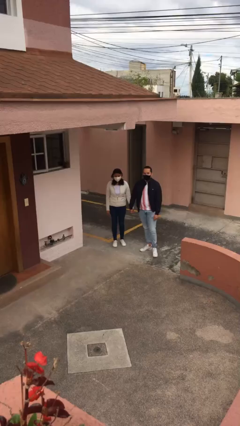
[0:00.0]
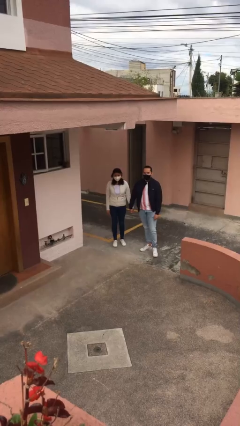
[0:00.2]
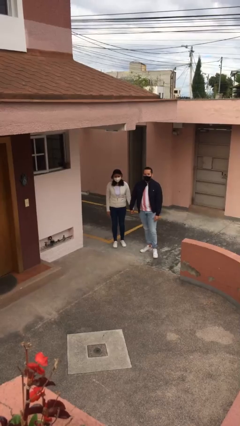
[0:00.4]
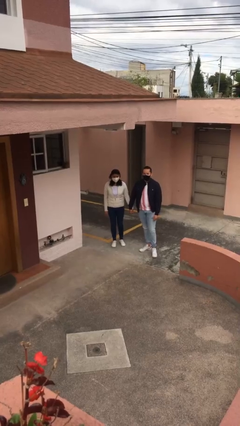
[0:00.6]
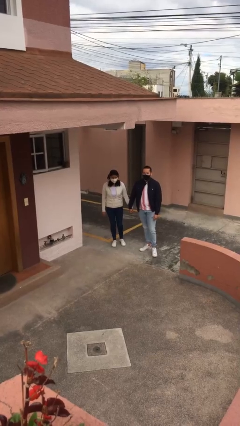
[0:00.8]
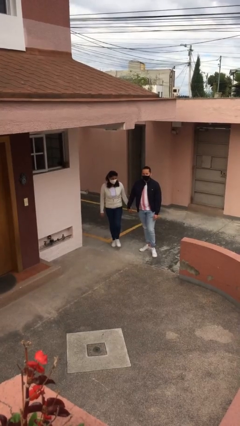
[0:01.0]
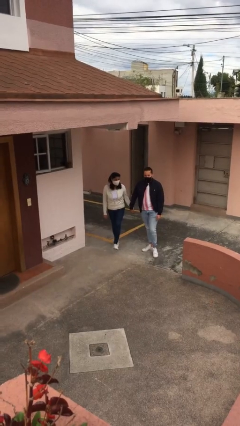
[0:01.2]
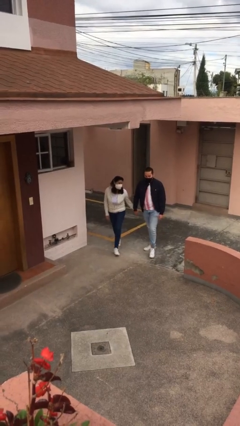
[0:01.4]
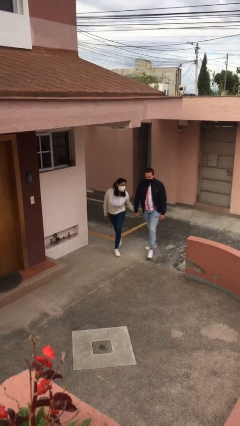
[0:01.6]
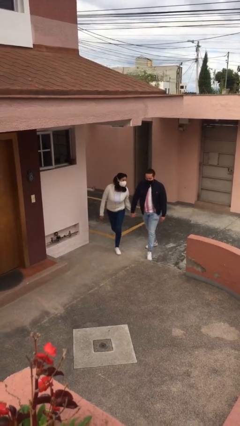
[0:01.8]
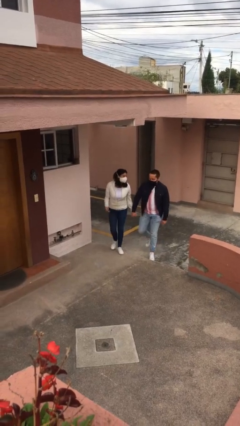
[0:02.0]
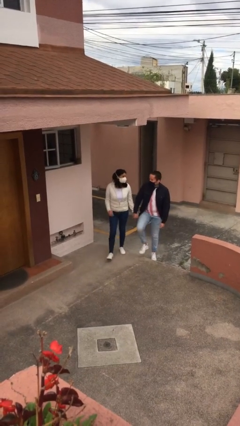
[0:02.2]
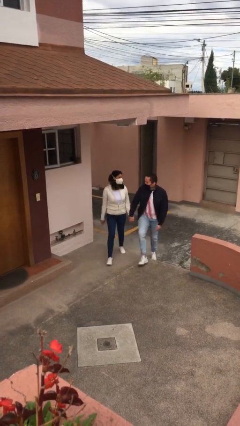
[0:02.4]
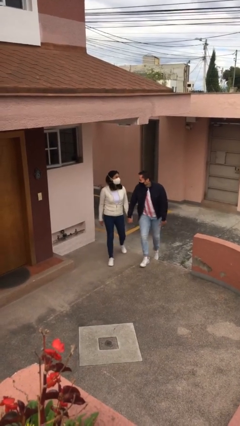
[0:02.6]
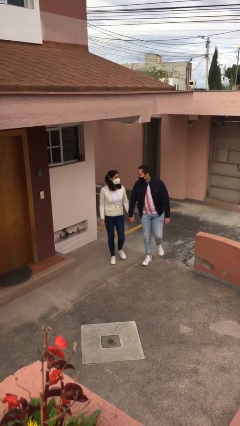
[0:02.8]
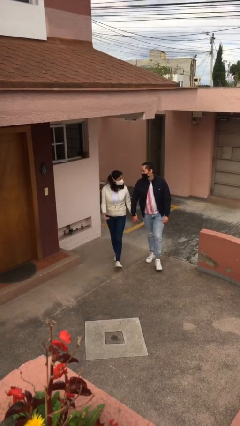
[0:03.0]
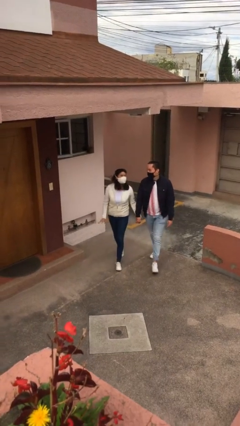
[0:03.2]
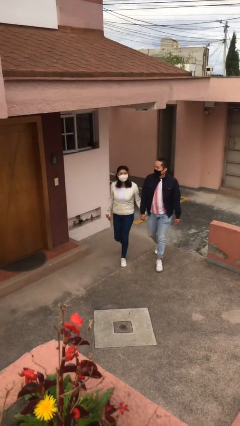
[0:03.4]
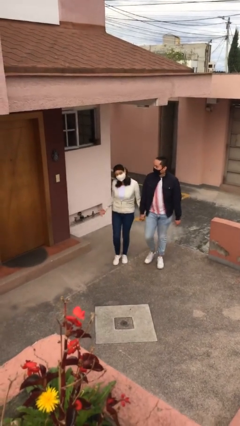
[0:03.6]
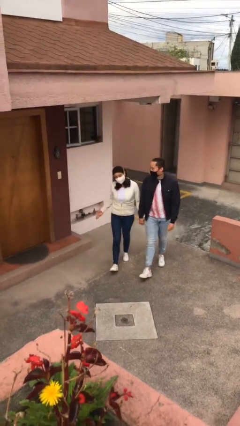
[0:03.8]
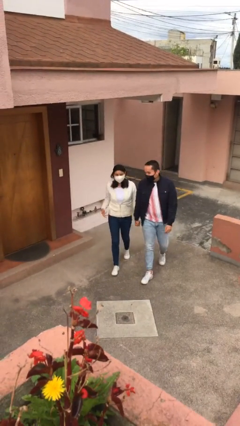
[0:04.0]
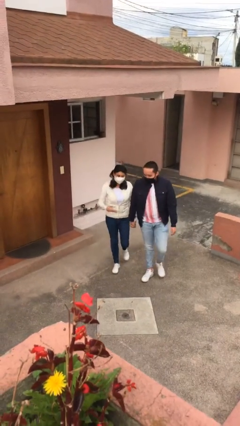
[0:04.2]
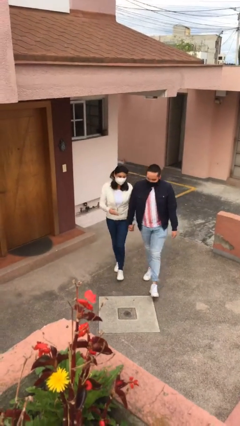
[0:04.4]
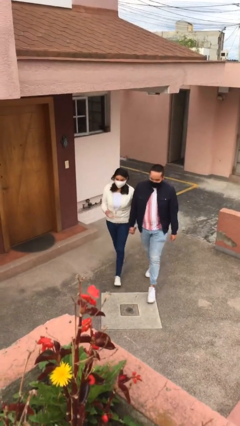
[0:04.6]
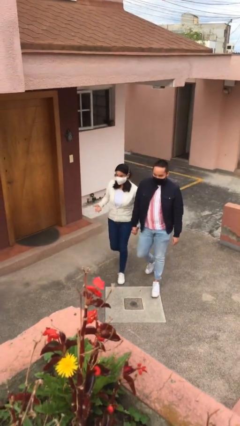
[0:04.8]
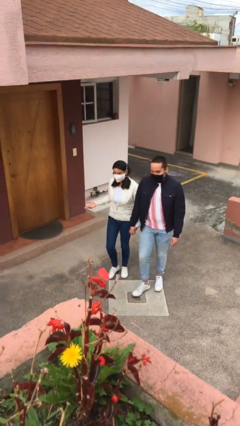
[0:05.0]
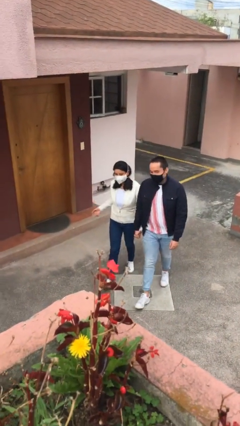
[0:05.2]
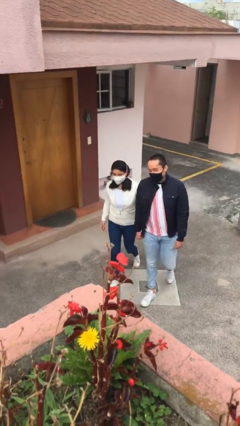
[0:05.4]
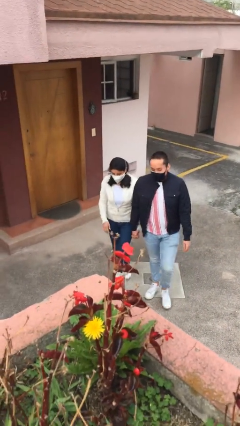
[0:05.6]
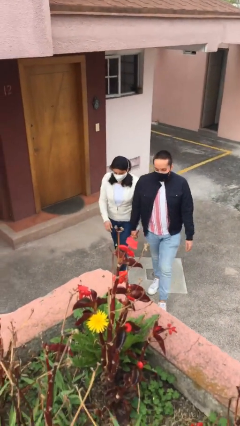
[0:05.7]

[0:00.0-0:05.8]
person holds hand

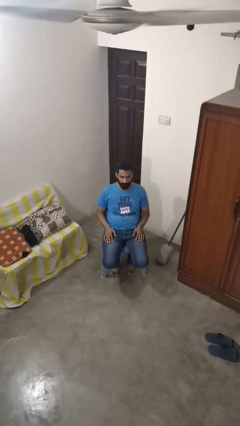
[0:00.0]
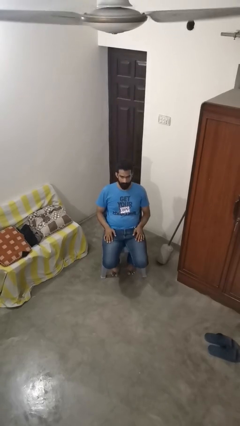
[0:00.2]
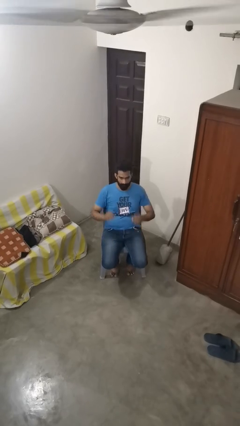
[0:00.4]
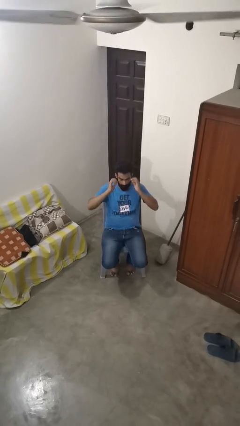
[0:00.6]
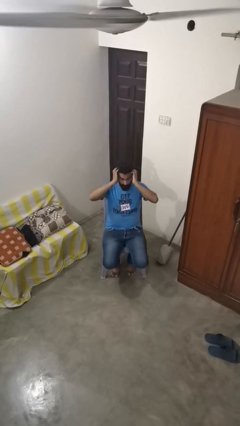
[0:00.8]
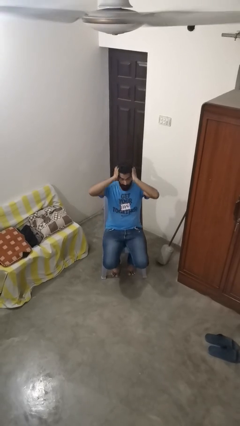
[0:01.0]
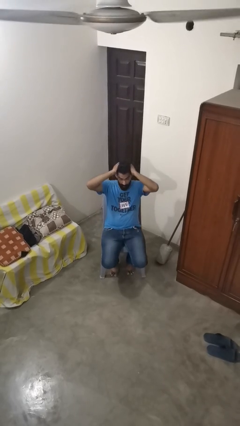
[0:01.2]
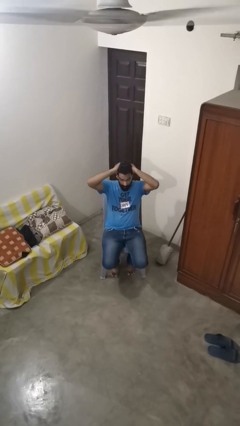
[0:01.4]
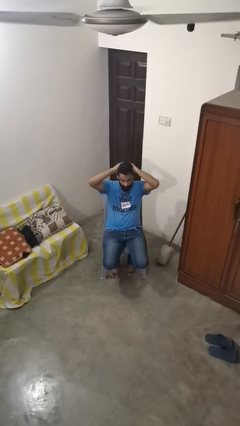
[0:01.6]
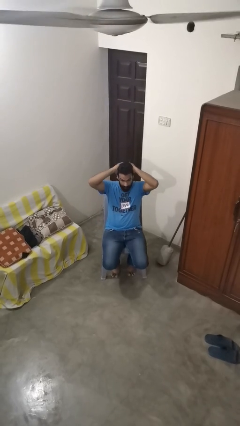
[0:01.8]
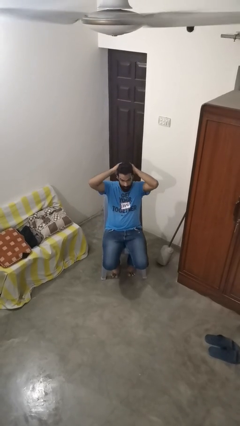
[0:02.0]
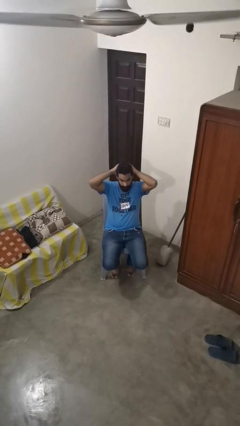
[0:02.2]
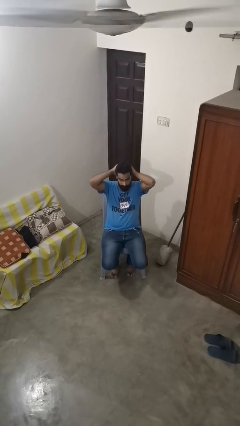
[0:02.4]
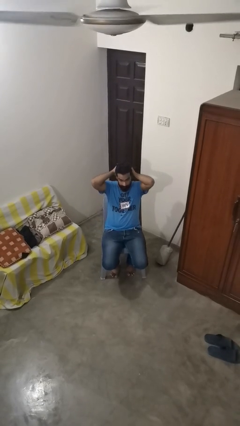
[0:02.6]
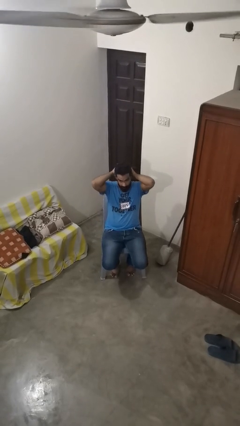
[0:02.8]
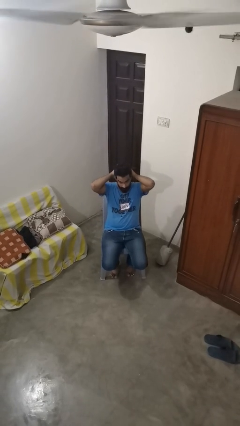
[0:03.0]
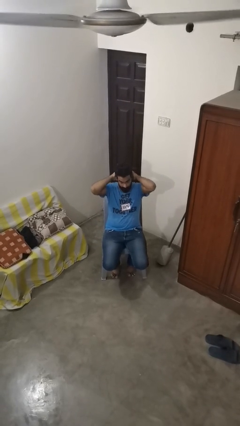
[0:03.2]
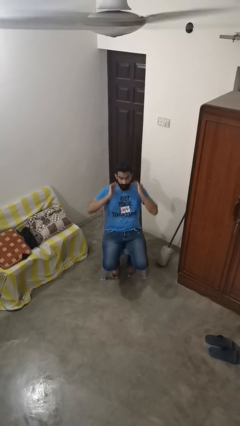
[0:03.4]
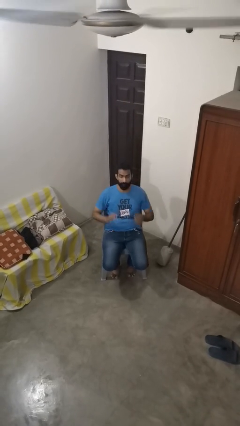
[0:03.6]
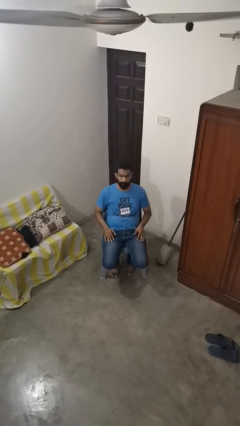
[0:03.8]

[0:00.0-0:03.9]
person strokes hair

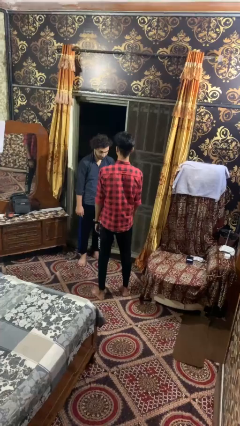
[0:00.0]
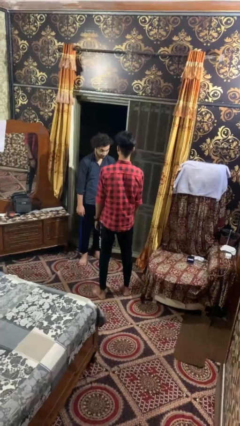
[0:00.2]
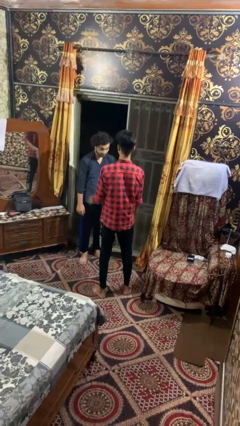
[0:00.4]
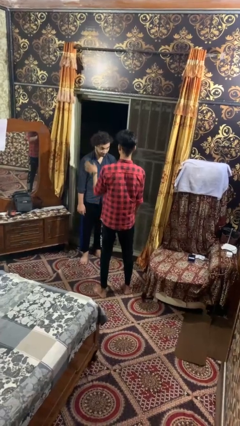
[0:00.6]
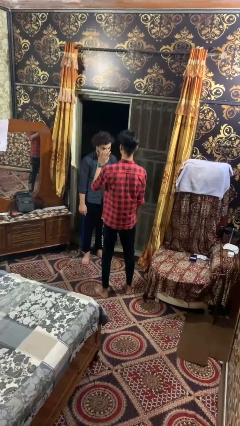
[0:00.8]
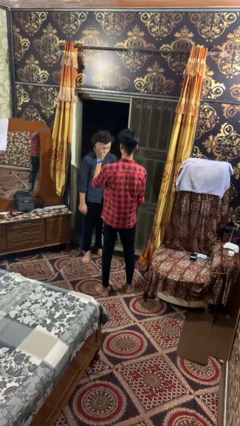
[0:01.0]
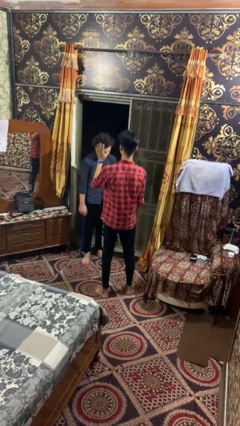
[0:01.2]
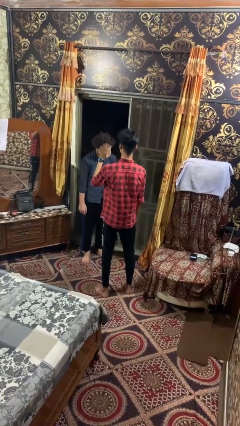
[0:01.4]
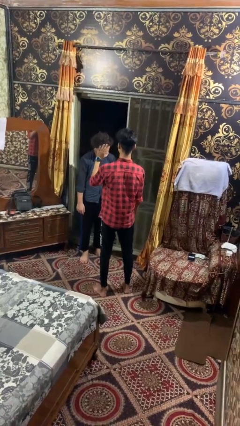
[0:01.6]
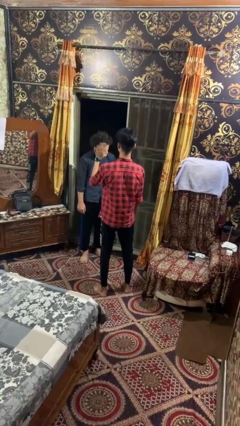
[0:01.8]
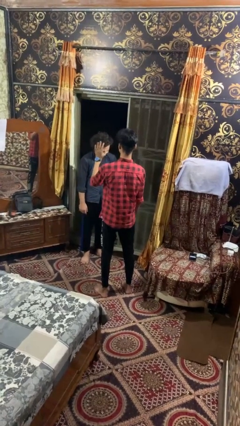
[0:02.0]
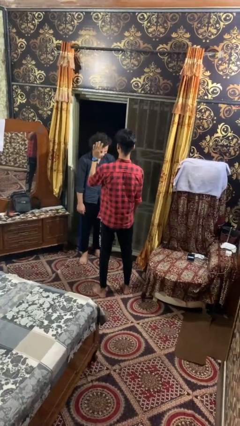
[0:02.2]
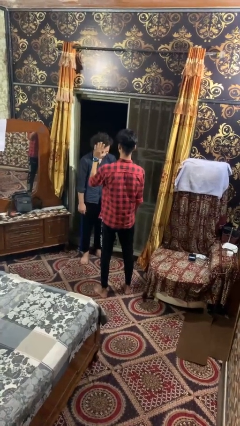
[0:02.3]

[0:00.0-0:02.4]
person waves at person

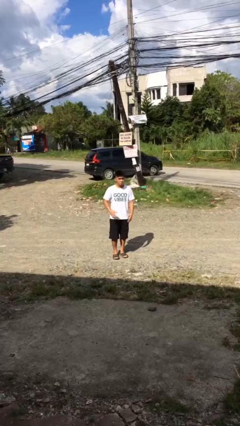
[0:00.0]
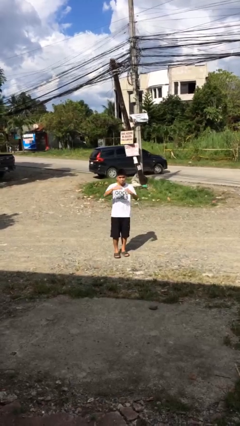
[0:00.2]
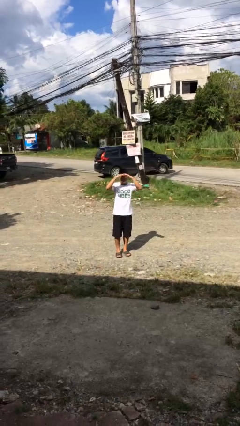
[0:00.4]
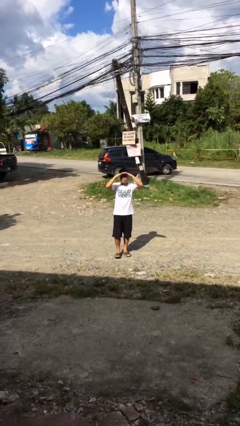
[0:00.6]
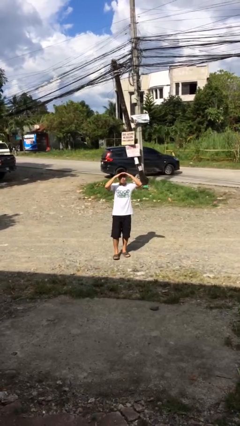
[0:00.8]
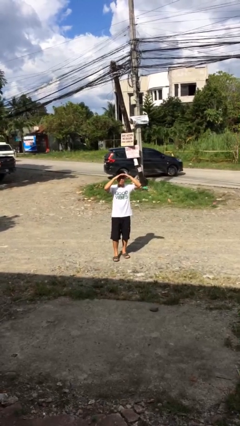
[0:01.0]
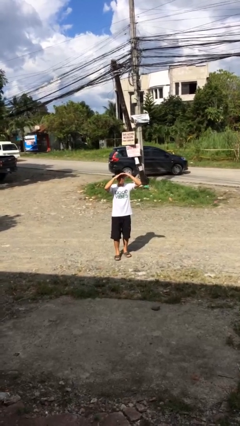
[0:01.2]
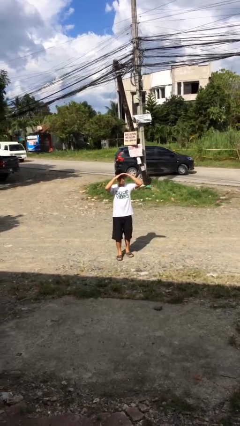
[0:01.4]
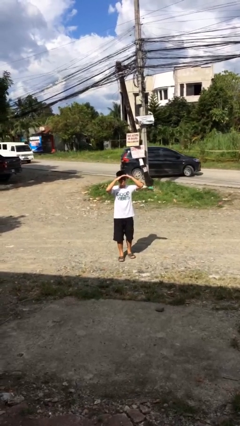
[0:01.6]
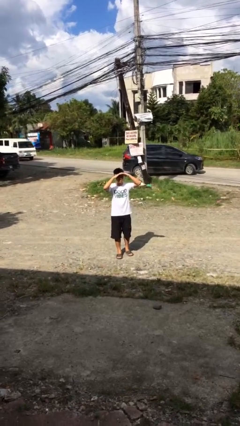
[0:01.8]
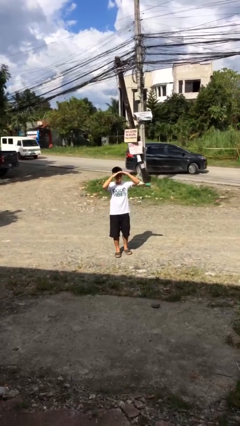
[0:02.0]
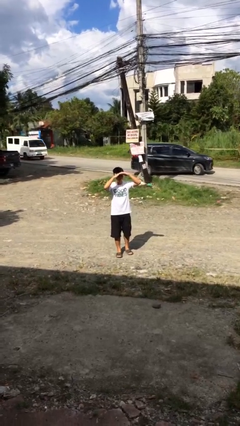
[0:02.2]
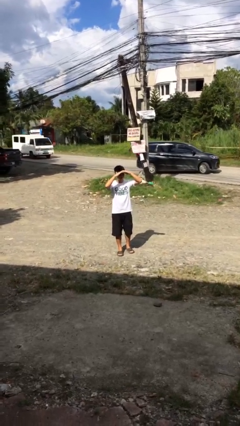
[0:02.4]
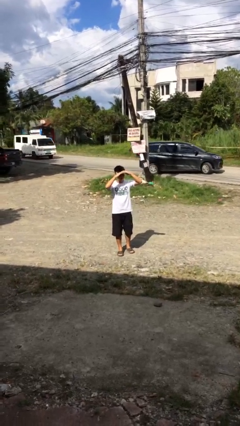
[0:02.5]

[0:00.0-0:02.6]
person shades eyes

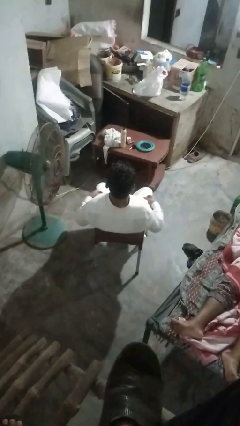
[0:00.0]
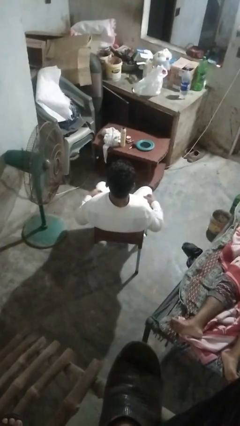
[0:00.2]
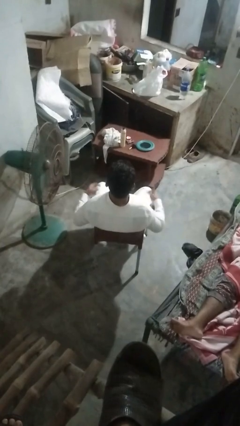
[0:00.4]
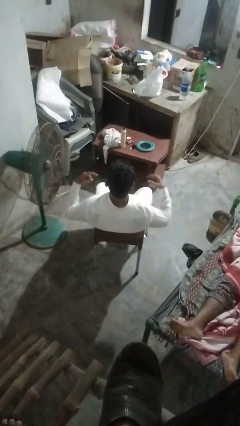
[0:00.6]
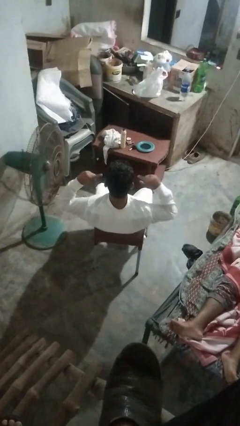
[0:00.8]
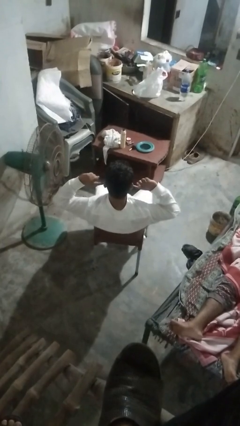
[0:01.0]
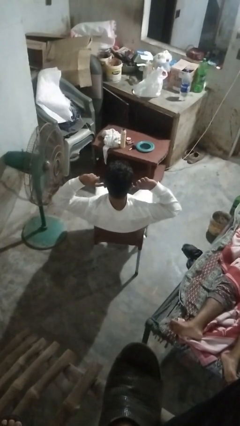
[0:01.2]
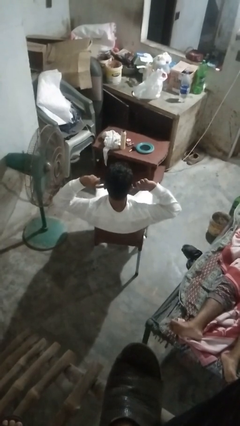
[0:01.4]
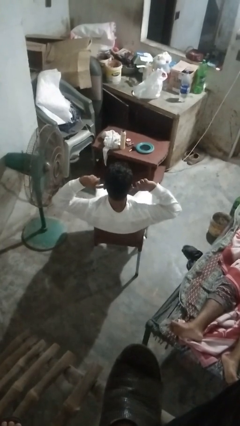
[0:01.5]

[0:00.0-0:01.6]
person puts fingers in ear

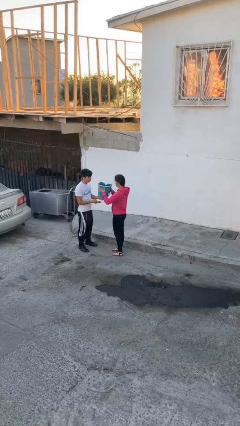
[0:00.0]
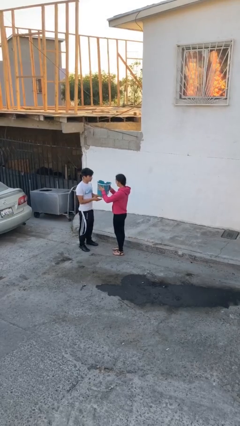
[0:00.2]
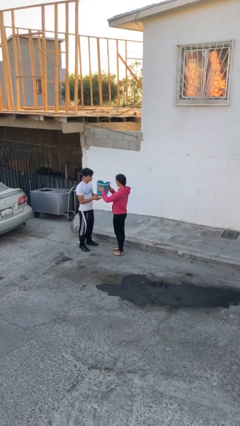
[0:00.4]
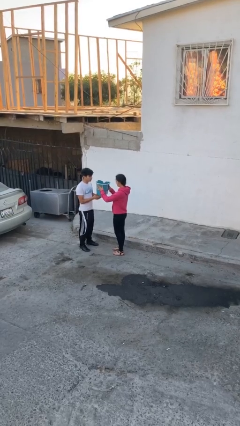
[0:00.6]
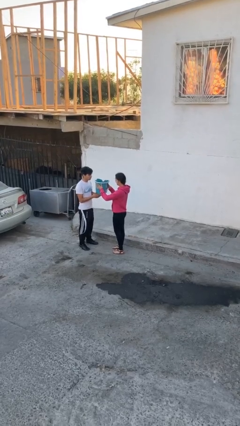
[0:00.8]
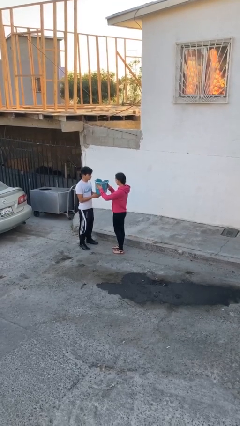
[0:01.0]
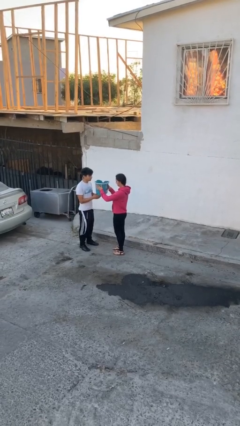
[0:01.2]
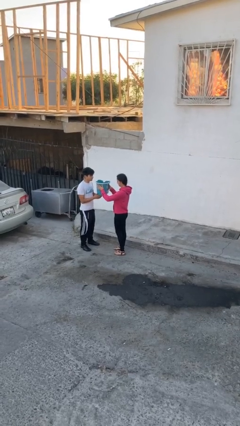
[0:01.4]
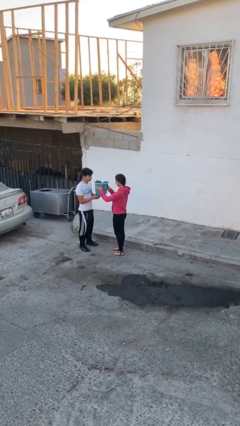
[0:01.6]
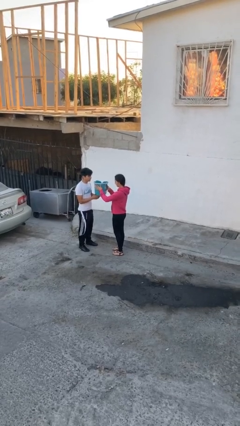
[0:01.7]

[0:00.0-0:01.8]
person transfers object to person
